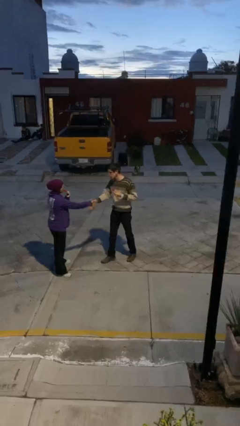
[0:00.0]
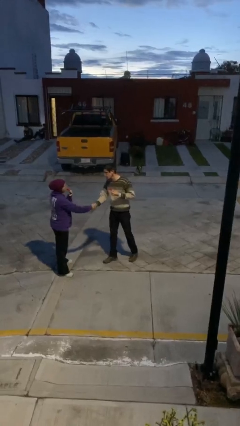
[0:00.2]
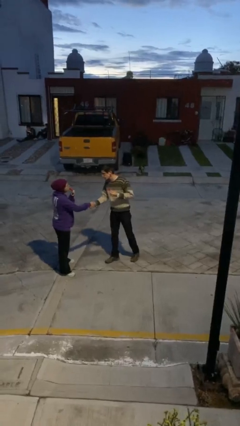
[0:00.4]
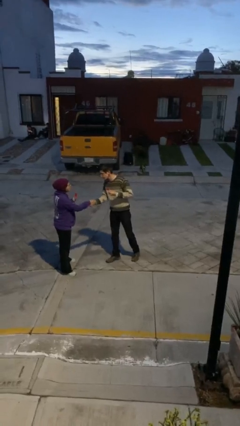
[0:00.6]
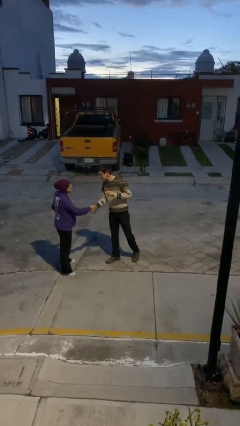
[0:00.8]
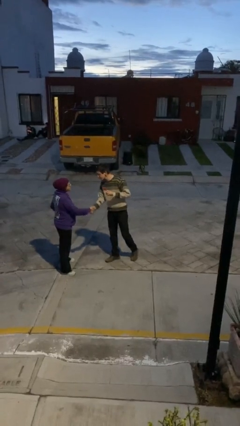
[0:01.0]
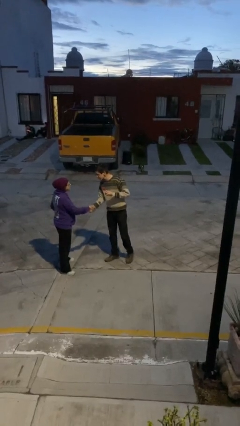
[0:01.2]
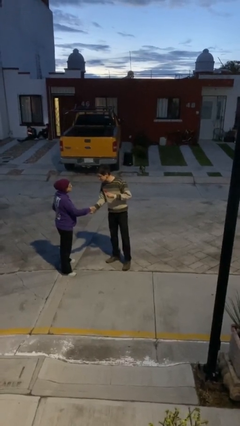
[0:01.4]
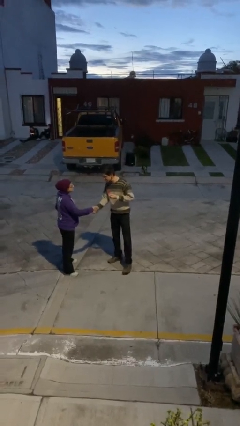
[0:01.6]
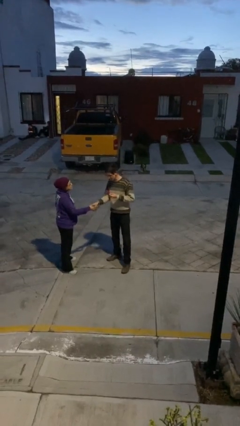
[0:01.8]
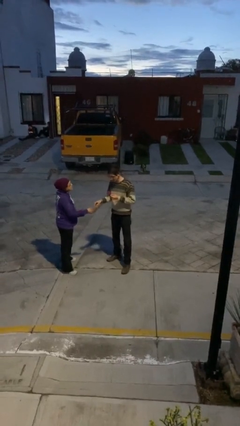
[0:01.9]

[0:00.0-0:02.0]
person shakes hand

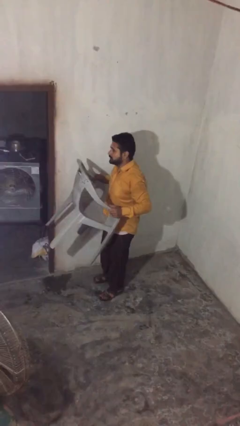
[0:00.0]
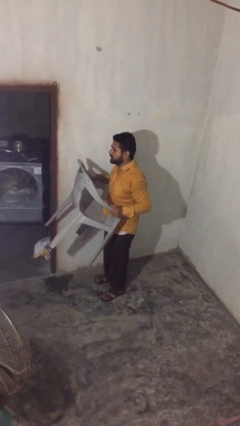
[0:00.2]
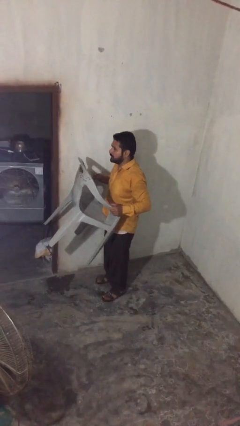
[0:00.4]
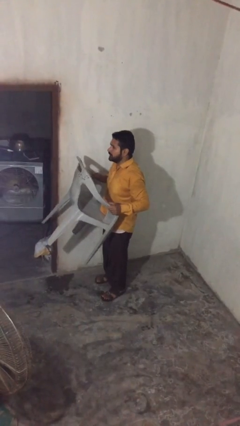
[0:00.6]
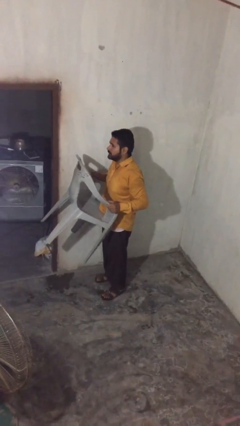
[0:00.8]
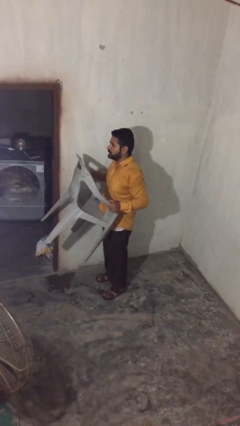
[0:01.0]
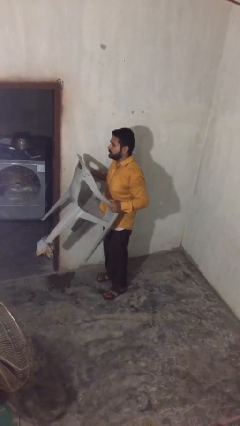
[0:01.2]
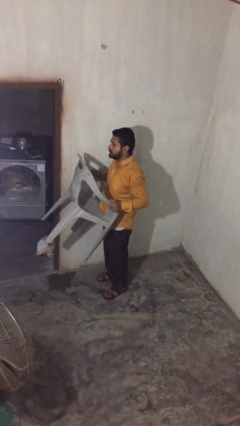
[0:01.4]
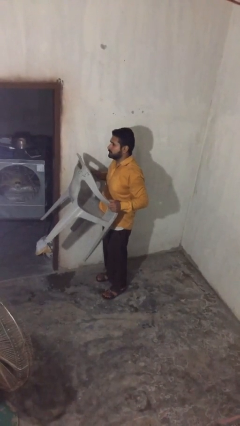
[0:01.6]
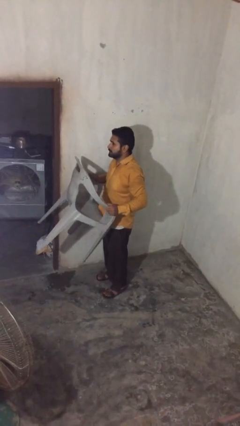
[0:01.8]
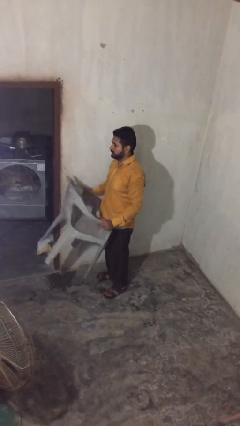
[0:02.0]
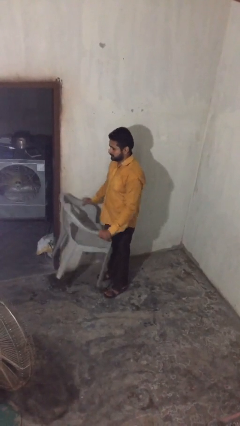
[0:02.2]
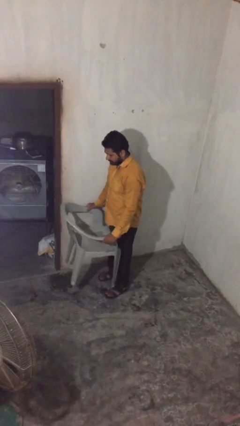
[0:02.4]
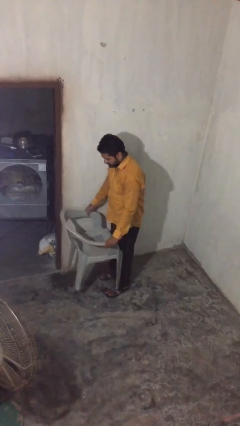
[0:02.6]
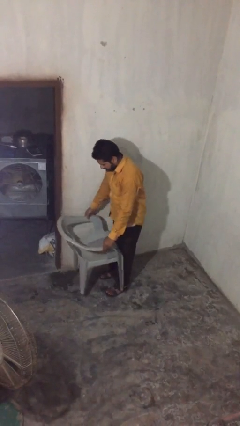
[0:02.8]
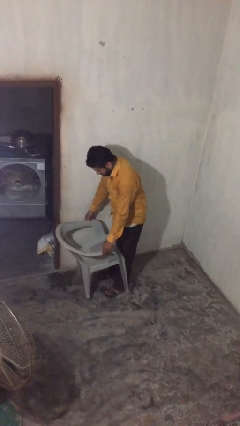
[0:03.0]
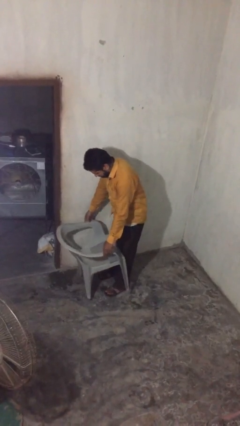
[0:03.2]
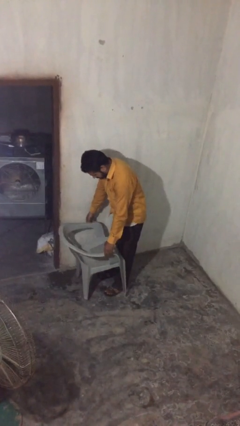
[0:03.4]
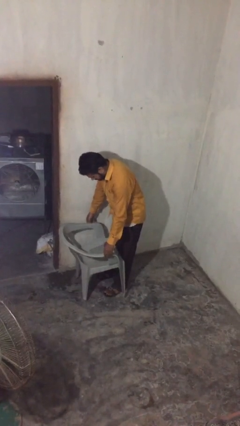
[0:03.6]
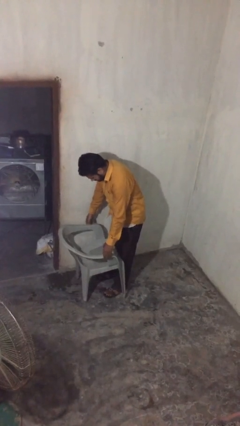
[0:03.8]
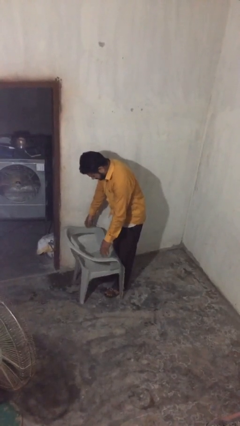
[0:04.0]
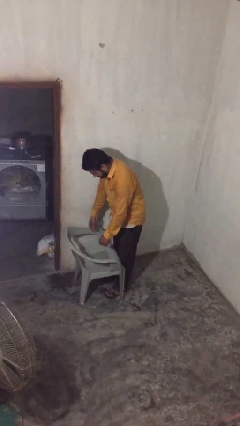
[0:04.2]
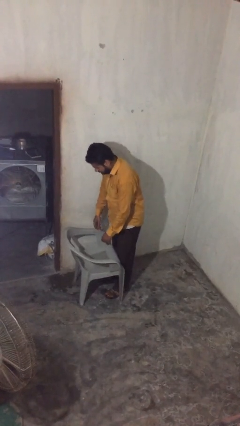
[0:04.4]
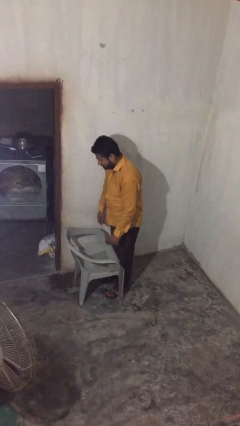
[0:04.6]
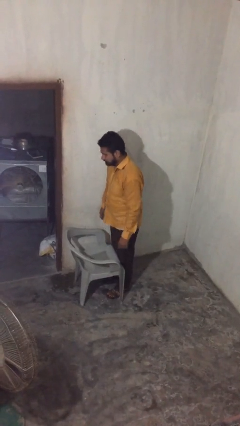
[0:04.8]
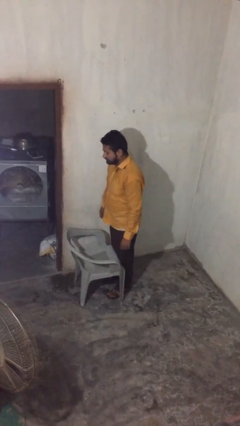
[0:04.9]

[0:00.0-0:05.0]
person puts down object on floor

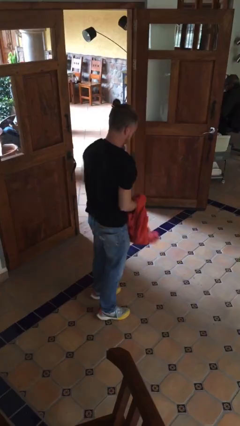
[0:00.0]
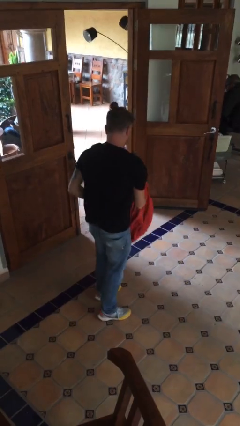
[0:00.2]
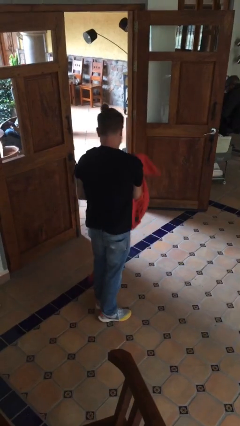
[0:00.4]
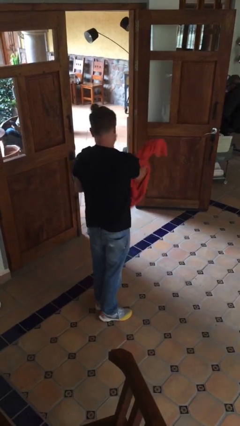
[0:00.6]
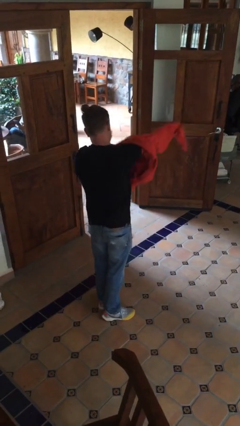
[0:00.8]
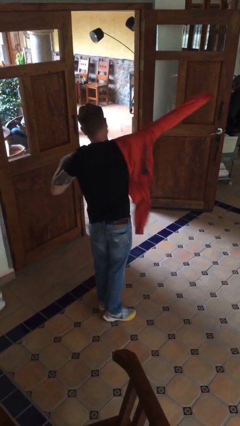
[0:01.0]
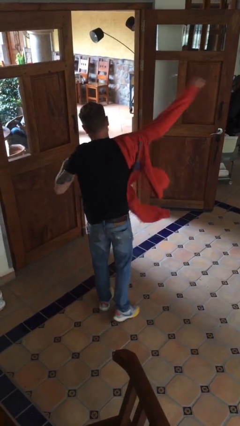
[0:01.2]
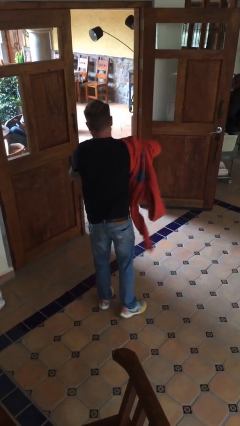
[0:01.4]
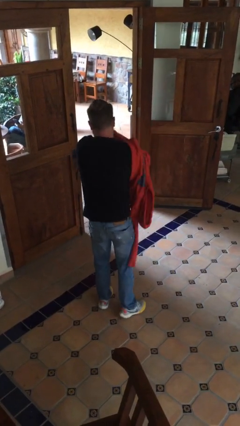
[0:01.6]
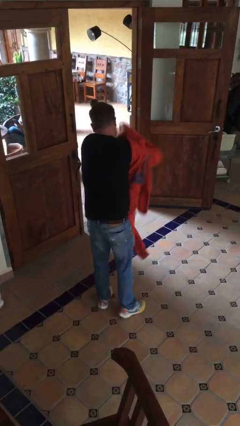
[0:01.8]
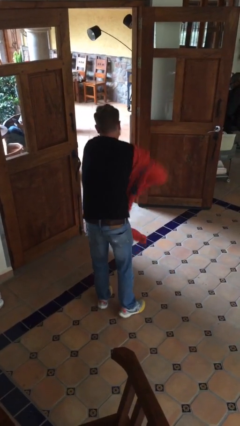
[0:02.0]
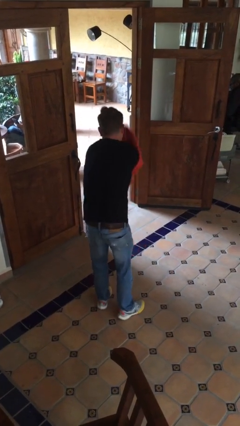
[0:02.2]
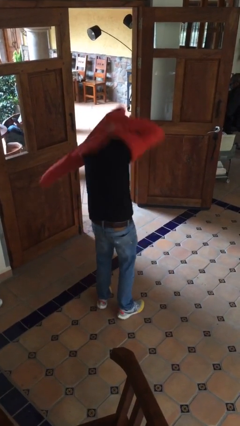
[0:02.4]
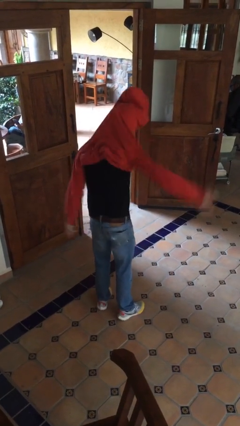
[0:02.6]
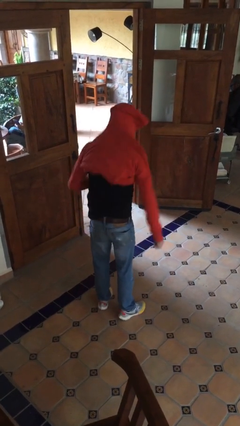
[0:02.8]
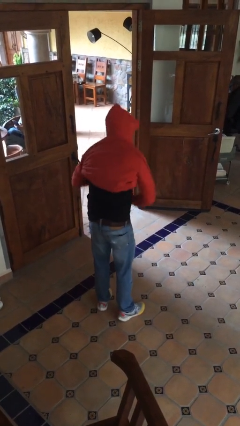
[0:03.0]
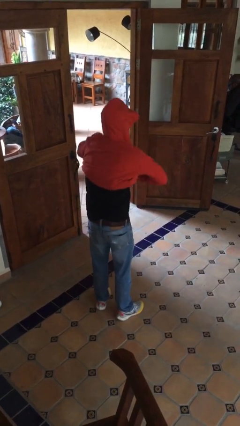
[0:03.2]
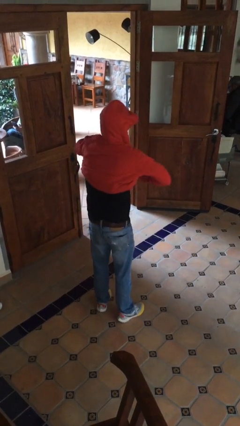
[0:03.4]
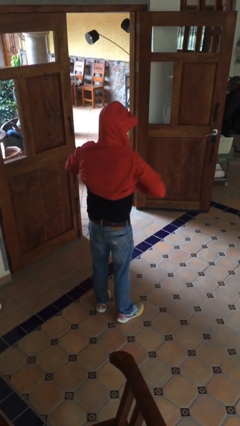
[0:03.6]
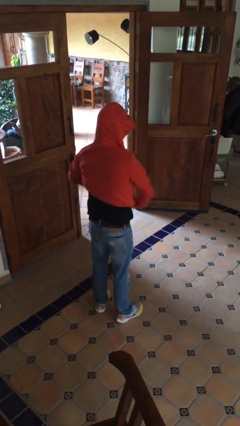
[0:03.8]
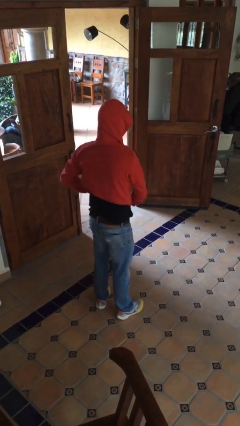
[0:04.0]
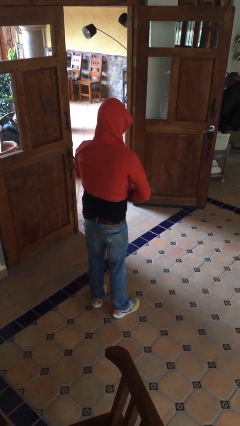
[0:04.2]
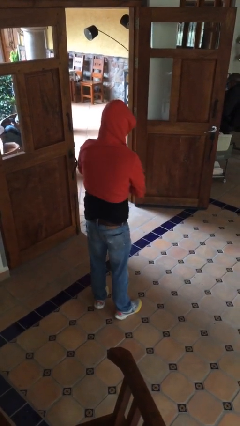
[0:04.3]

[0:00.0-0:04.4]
person puts on hoodie

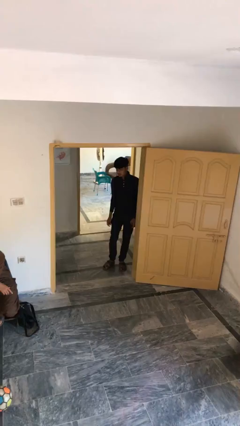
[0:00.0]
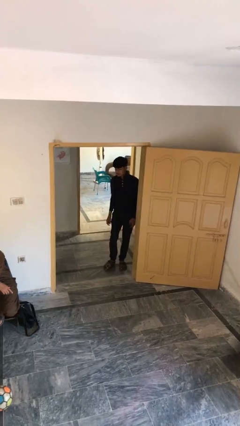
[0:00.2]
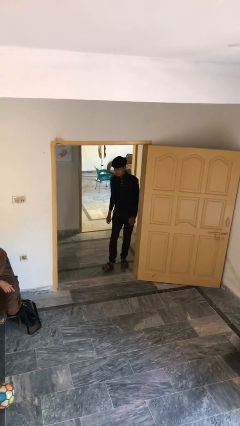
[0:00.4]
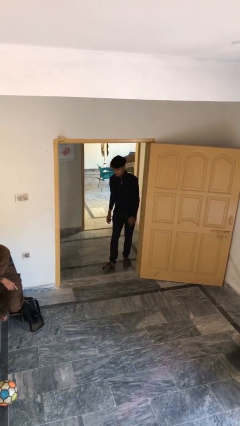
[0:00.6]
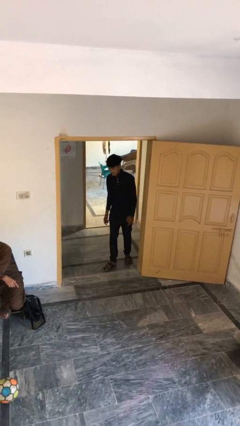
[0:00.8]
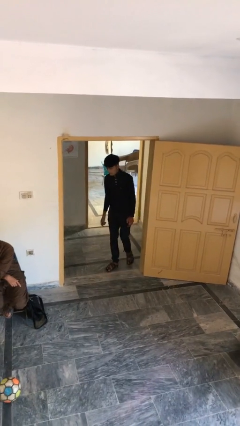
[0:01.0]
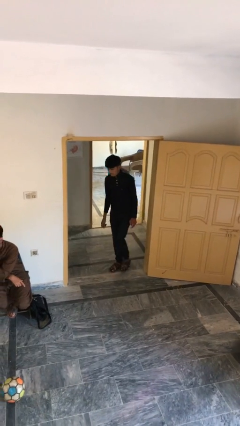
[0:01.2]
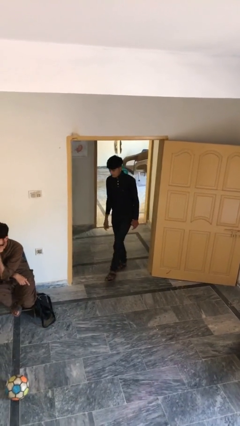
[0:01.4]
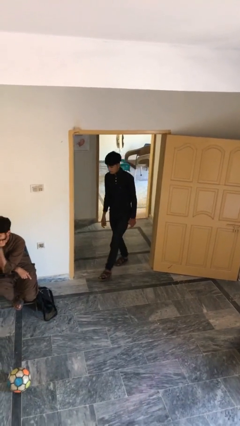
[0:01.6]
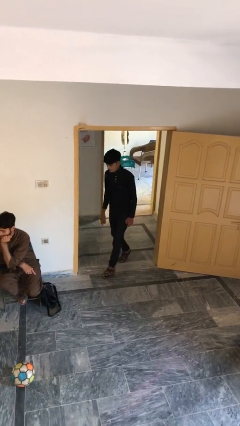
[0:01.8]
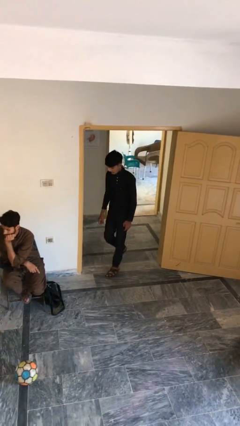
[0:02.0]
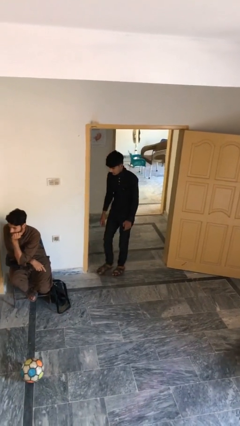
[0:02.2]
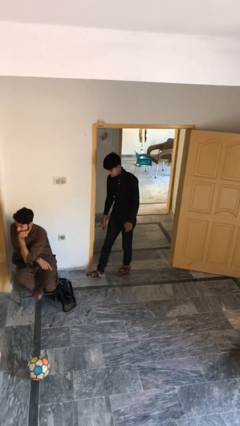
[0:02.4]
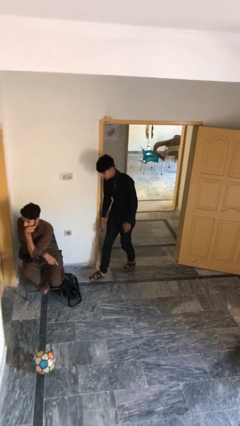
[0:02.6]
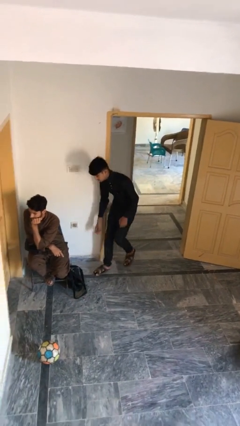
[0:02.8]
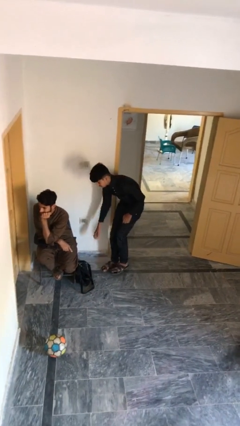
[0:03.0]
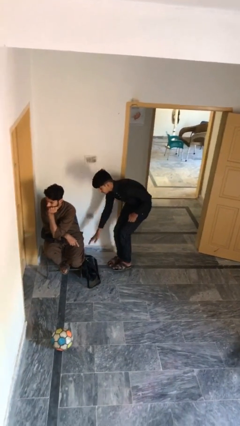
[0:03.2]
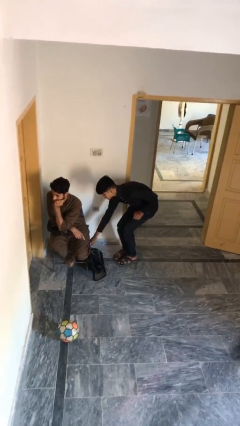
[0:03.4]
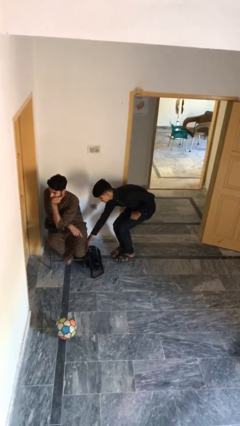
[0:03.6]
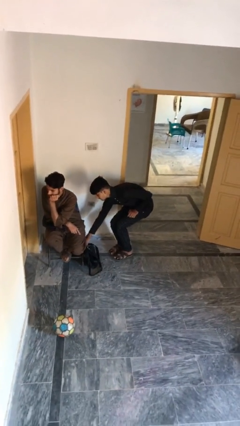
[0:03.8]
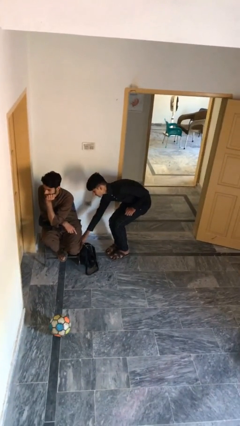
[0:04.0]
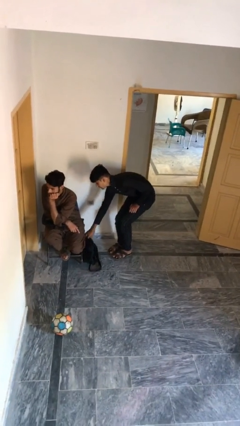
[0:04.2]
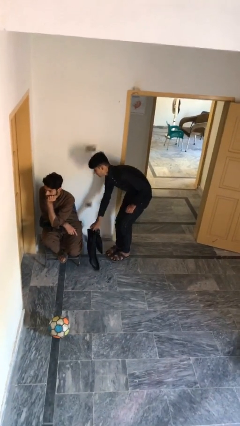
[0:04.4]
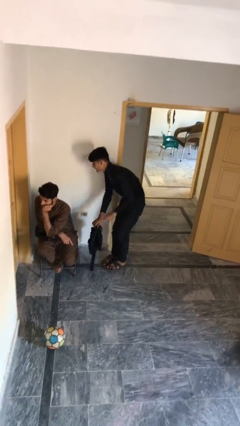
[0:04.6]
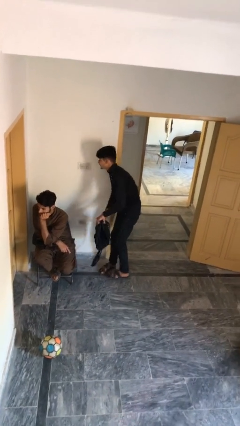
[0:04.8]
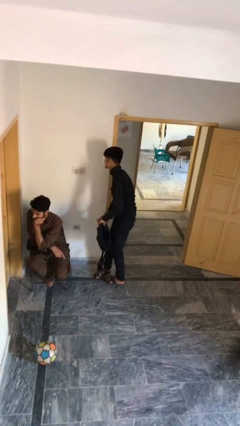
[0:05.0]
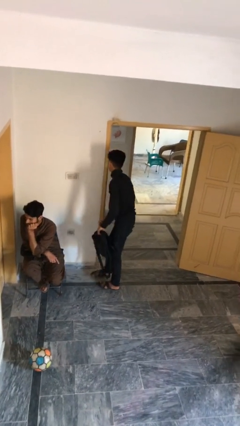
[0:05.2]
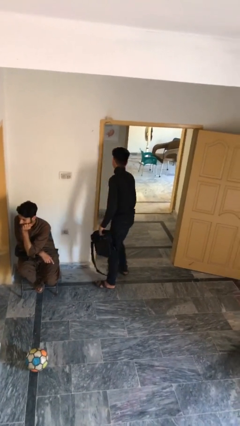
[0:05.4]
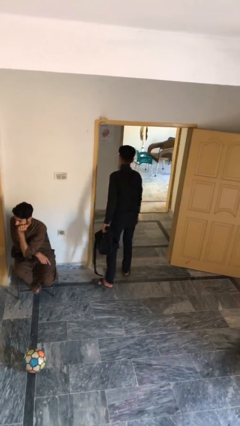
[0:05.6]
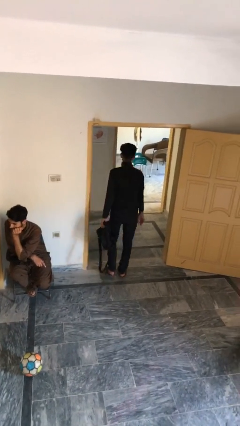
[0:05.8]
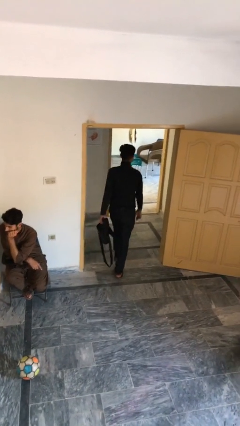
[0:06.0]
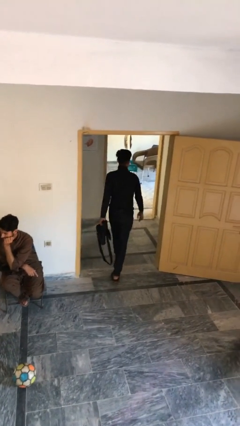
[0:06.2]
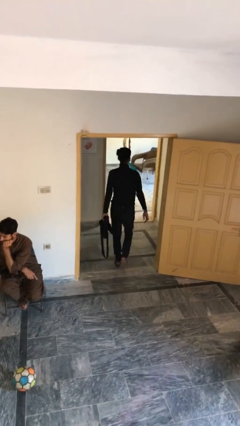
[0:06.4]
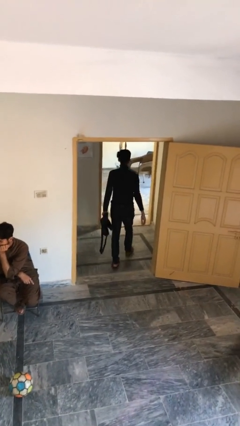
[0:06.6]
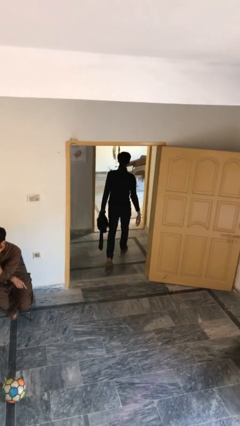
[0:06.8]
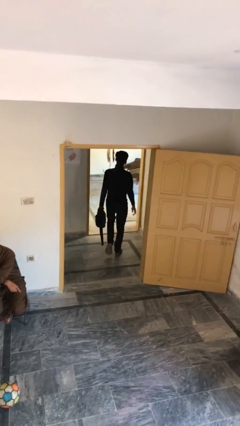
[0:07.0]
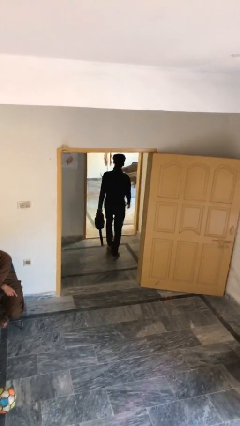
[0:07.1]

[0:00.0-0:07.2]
person steals object from person
